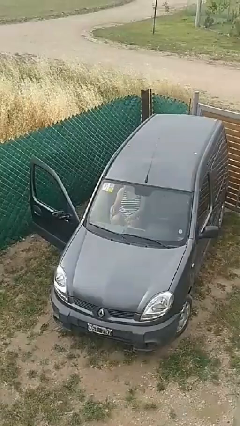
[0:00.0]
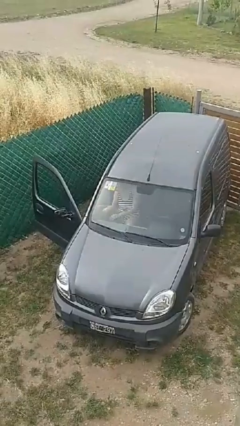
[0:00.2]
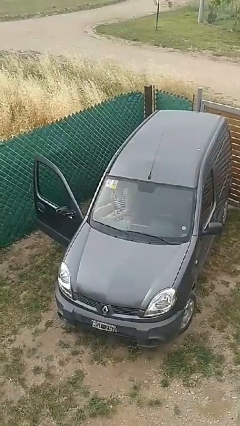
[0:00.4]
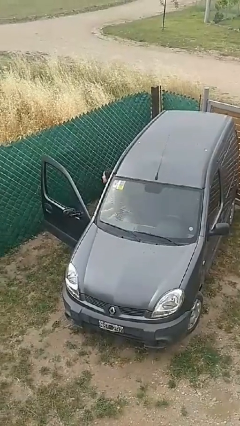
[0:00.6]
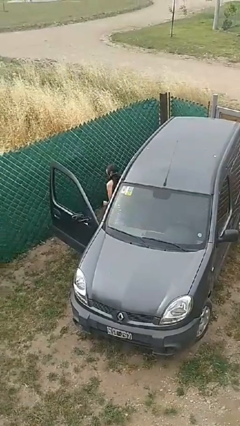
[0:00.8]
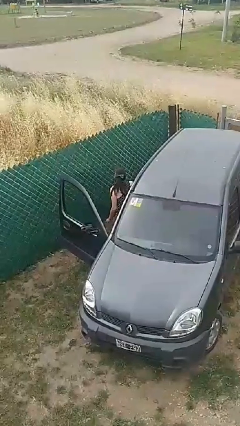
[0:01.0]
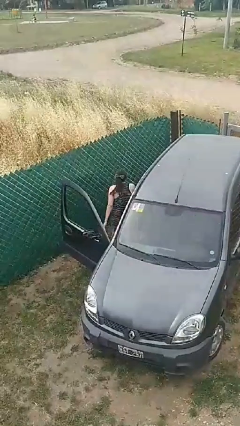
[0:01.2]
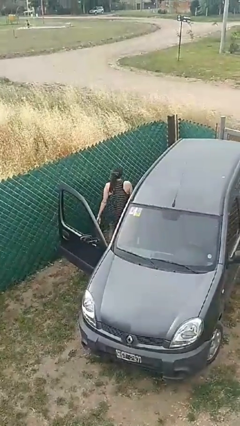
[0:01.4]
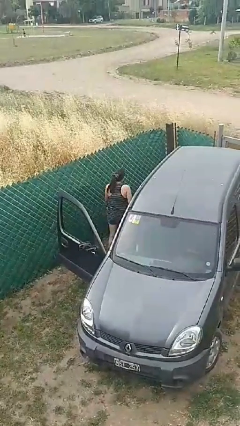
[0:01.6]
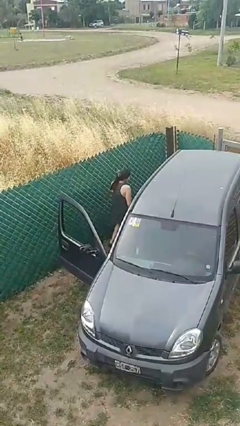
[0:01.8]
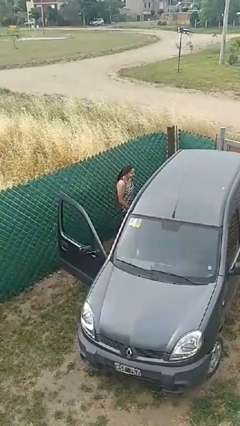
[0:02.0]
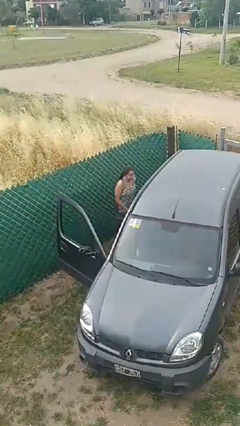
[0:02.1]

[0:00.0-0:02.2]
person exits car

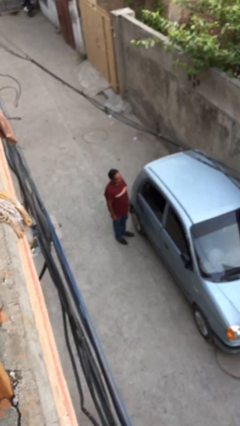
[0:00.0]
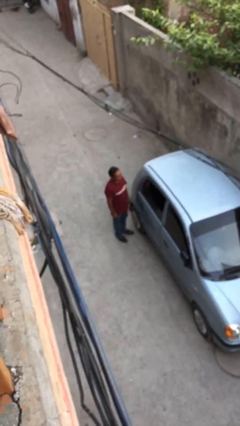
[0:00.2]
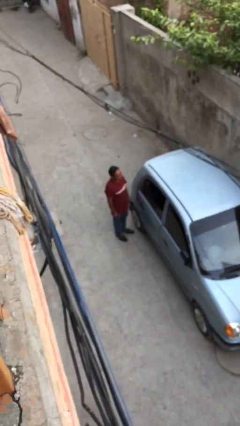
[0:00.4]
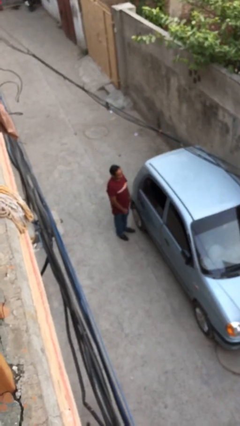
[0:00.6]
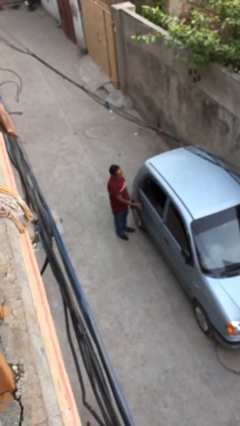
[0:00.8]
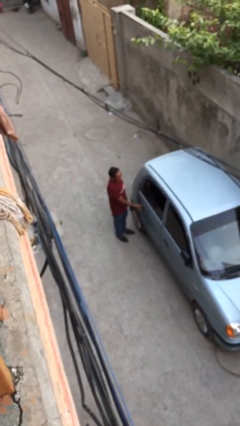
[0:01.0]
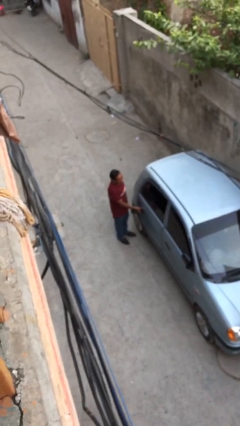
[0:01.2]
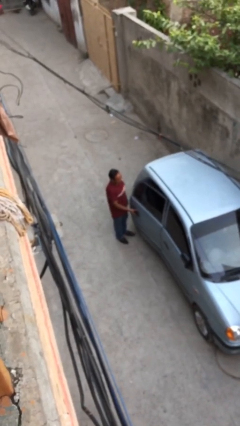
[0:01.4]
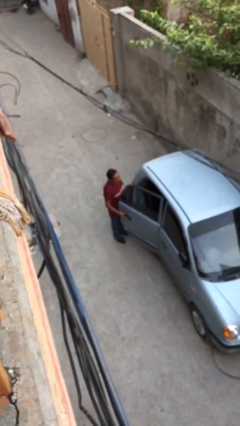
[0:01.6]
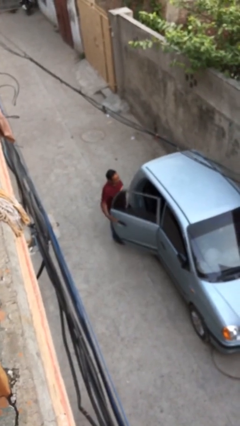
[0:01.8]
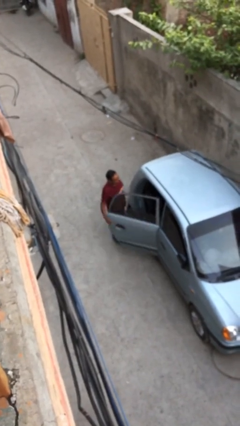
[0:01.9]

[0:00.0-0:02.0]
person opens car door

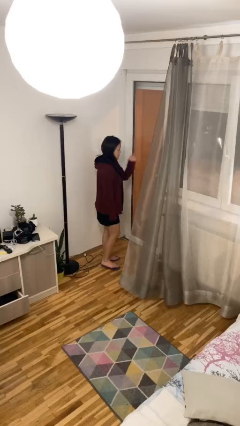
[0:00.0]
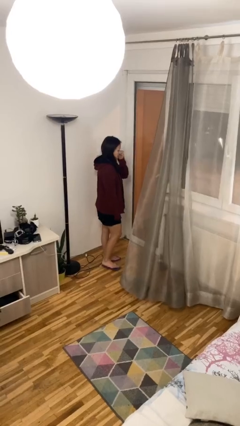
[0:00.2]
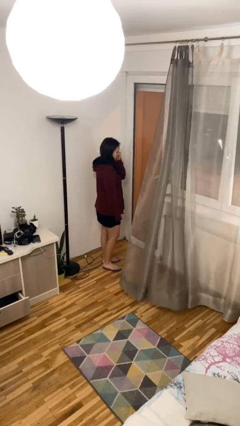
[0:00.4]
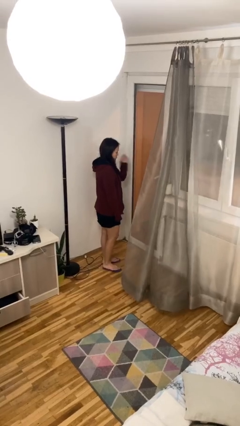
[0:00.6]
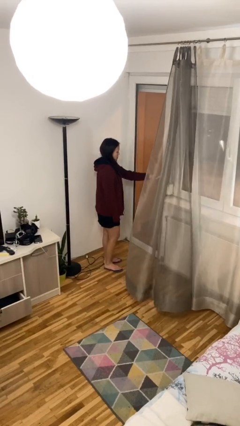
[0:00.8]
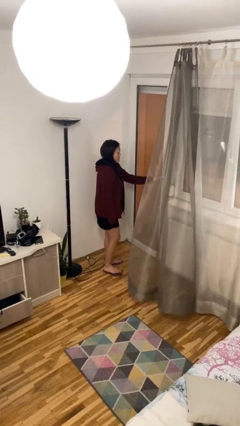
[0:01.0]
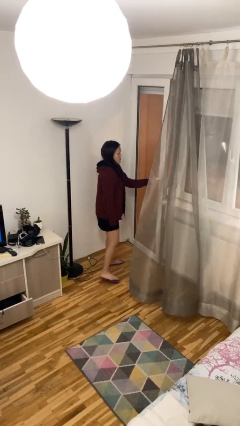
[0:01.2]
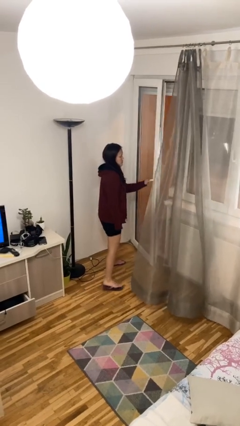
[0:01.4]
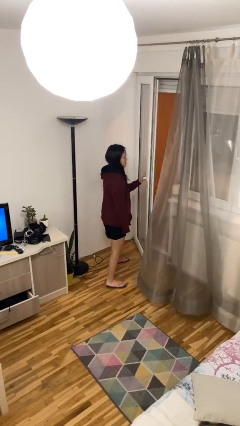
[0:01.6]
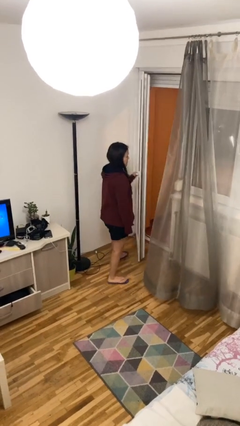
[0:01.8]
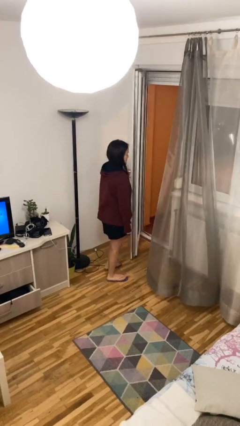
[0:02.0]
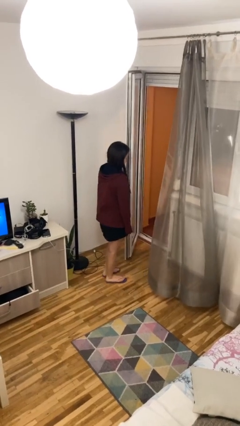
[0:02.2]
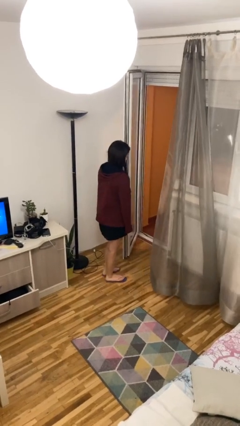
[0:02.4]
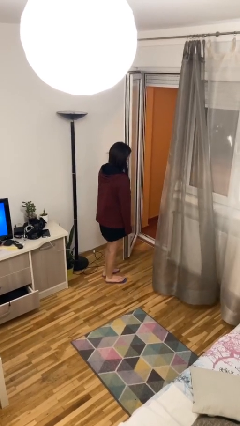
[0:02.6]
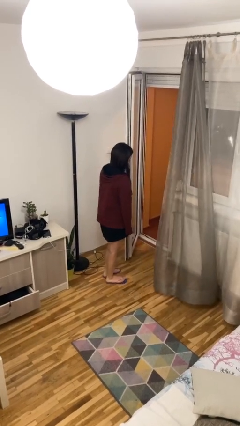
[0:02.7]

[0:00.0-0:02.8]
person opens facility door

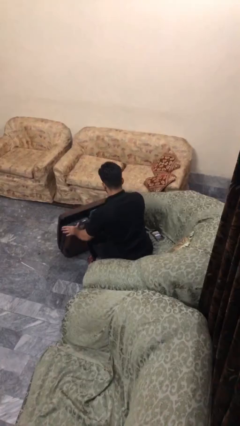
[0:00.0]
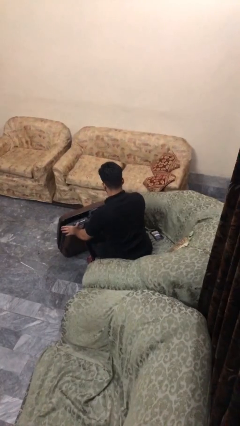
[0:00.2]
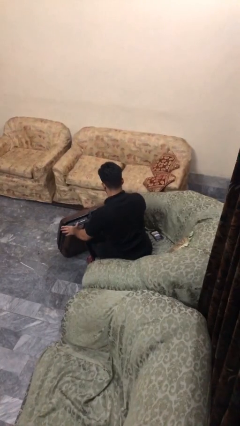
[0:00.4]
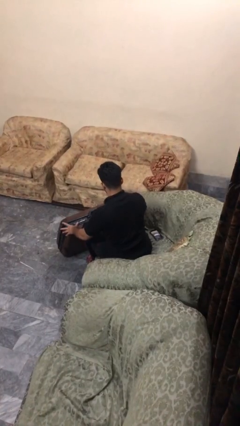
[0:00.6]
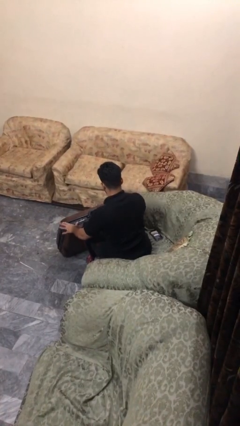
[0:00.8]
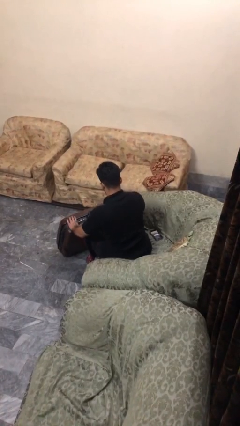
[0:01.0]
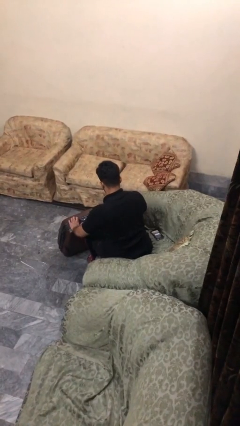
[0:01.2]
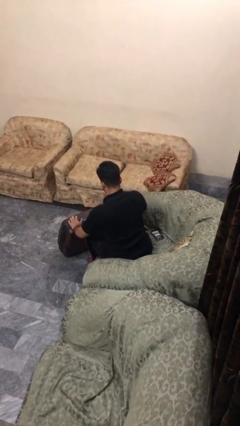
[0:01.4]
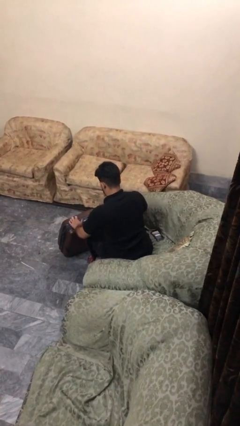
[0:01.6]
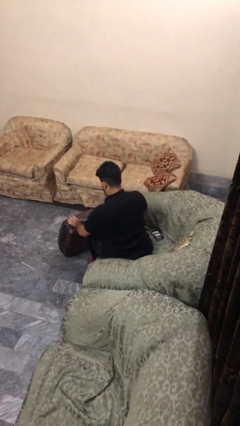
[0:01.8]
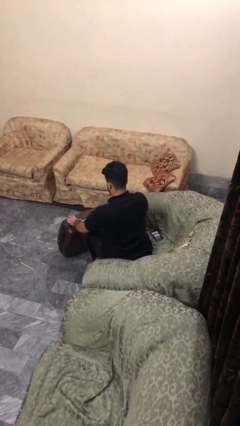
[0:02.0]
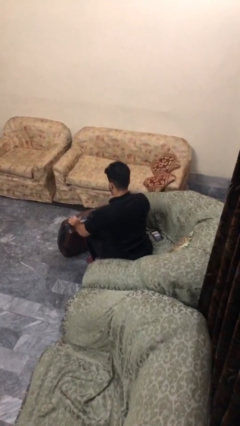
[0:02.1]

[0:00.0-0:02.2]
person closes suitcase

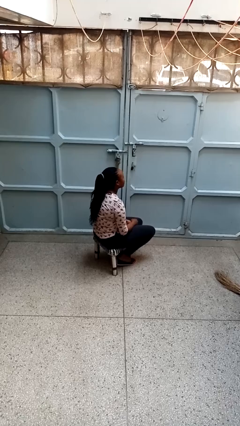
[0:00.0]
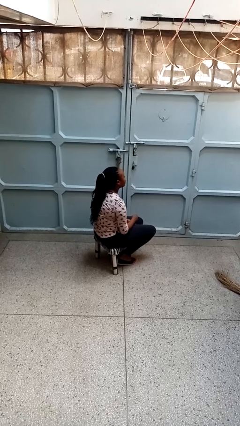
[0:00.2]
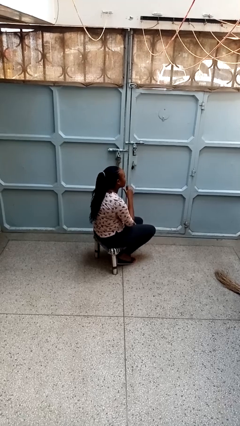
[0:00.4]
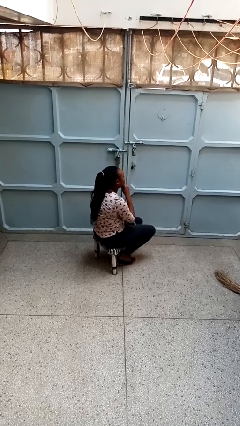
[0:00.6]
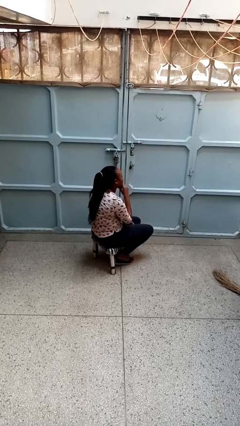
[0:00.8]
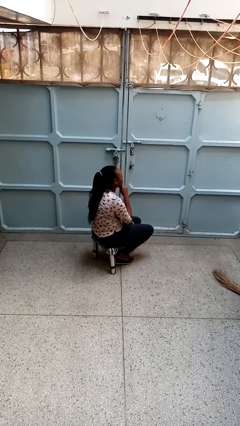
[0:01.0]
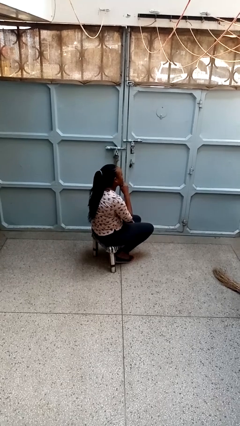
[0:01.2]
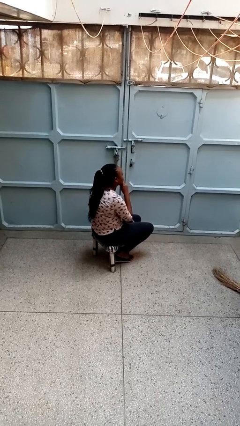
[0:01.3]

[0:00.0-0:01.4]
person strokes chin

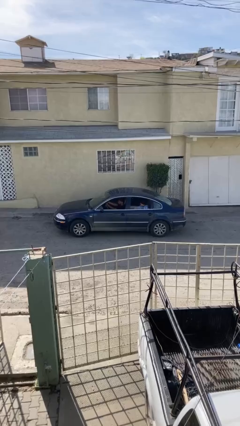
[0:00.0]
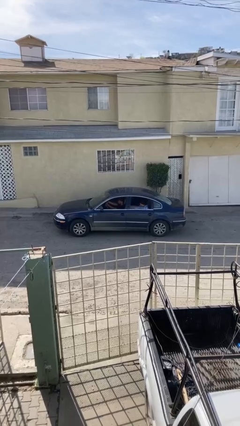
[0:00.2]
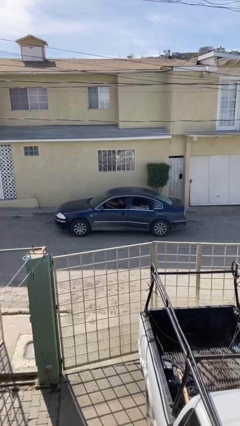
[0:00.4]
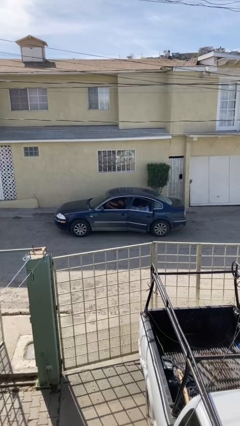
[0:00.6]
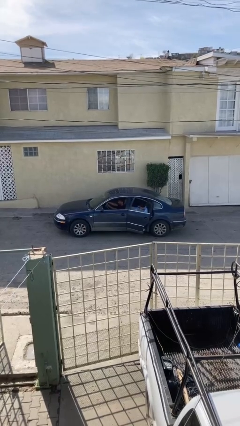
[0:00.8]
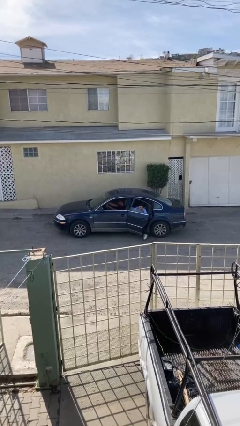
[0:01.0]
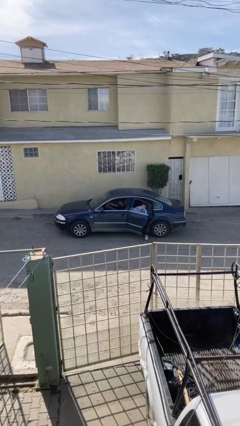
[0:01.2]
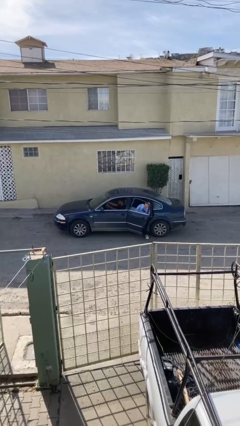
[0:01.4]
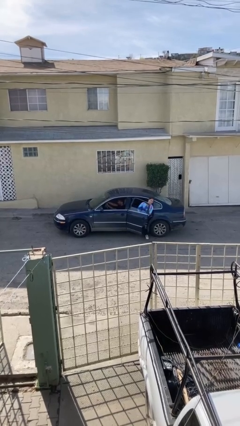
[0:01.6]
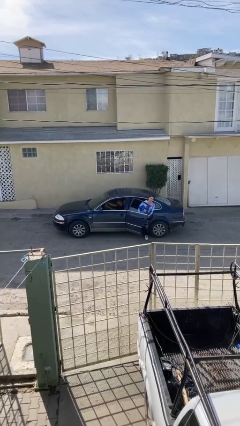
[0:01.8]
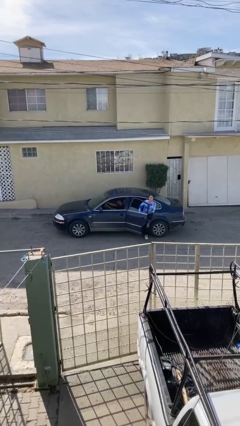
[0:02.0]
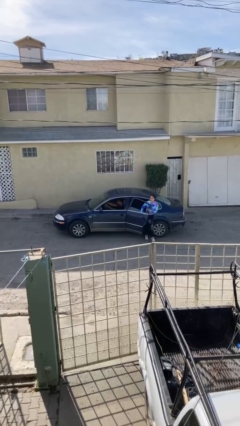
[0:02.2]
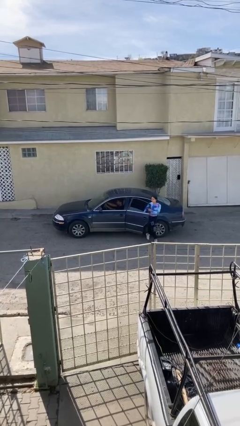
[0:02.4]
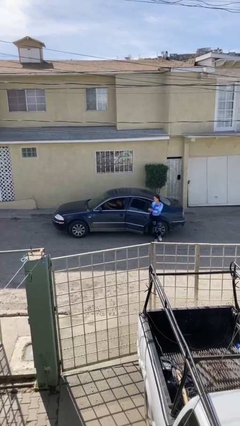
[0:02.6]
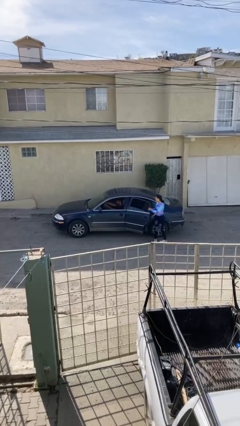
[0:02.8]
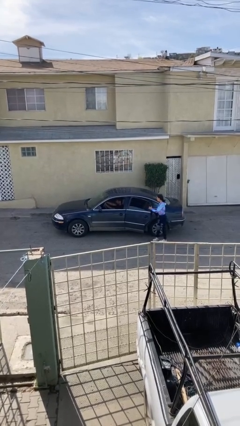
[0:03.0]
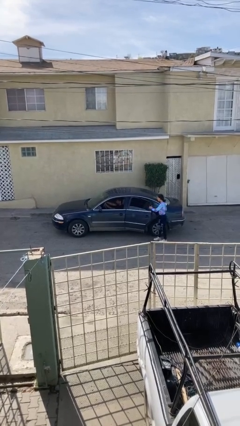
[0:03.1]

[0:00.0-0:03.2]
car drops off person

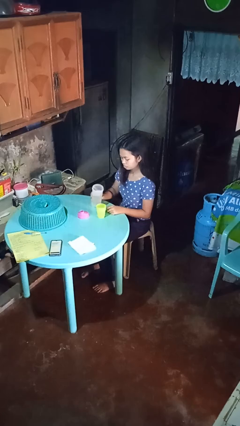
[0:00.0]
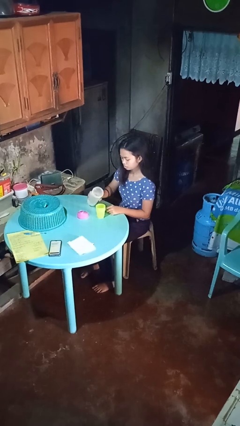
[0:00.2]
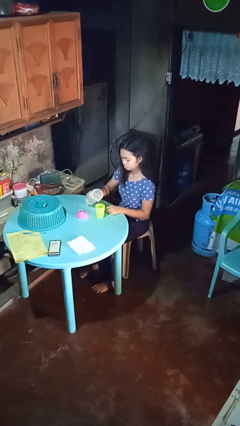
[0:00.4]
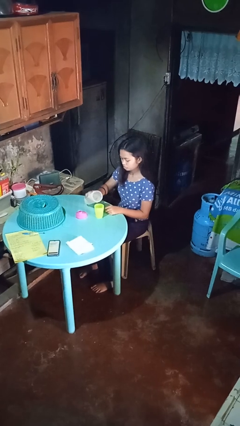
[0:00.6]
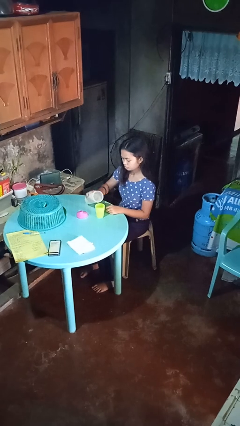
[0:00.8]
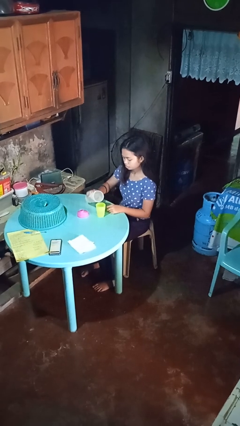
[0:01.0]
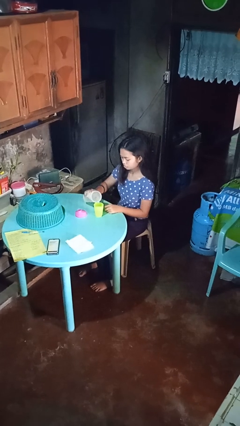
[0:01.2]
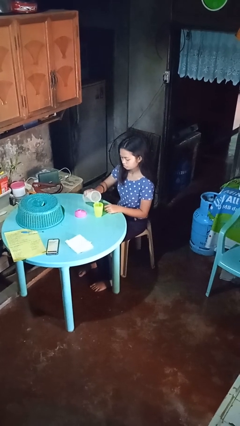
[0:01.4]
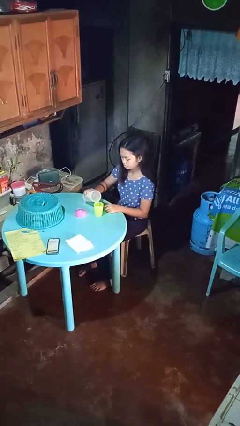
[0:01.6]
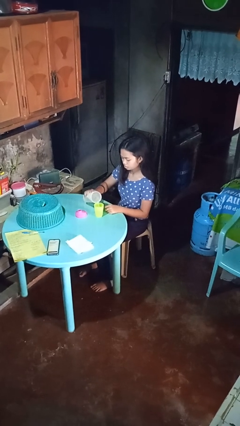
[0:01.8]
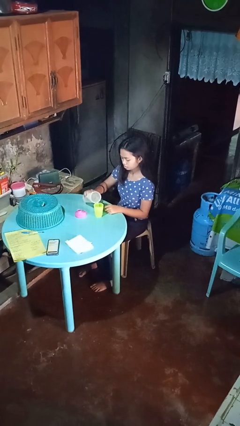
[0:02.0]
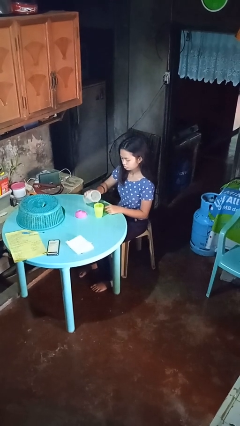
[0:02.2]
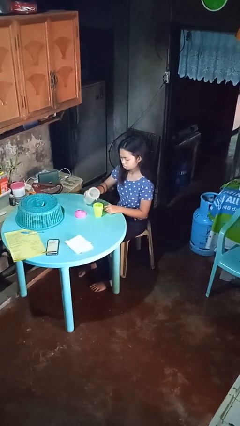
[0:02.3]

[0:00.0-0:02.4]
person pours liquid into cup

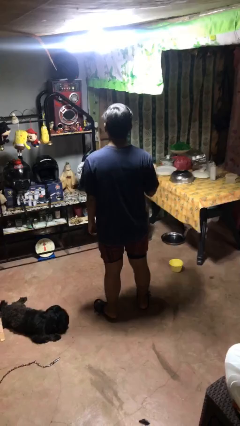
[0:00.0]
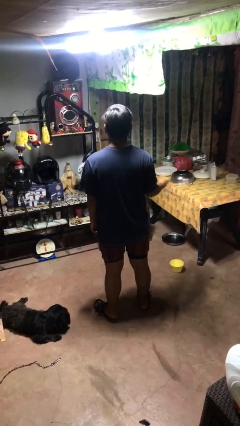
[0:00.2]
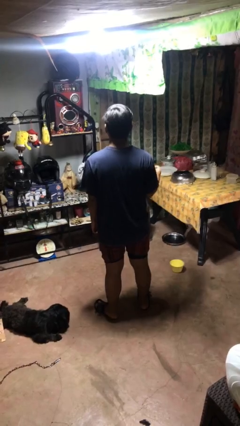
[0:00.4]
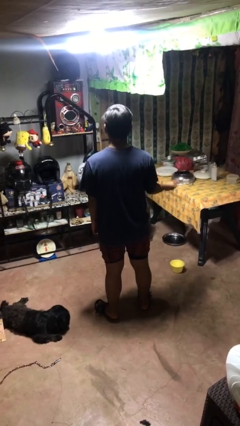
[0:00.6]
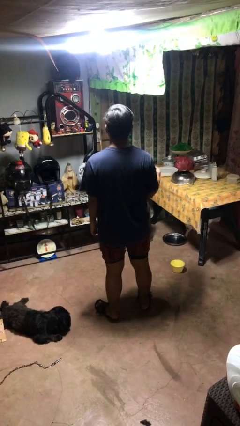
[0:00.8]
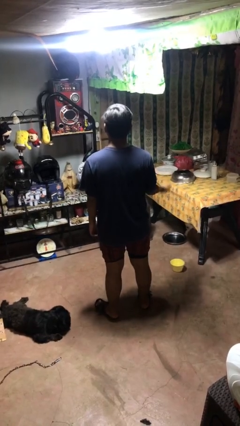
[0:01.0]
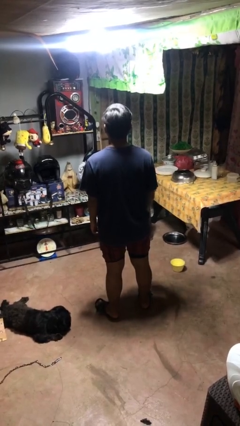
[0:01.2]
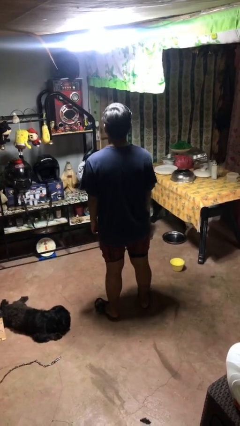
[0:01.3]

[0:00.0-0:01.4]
person snaps fingers
